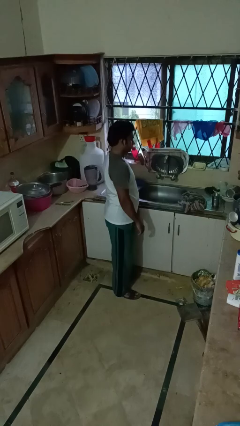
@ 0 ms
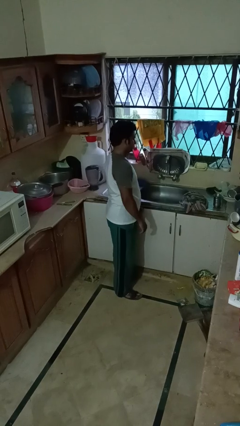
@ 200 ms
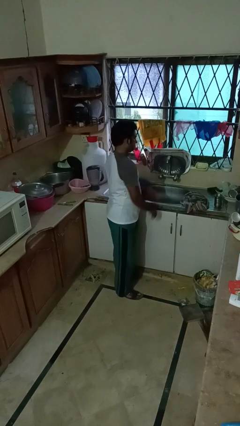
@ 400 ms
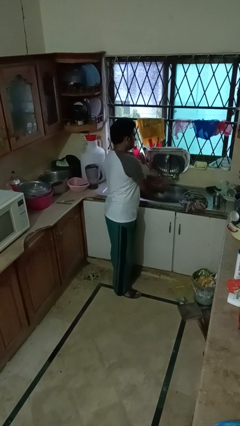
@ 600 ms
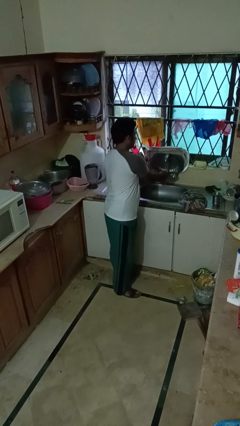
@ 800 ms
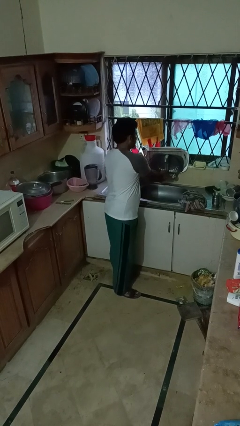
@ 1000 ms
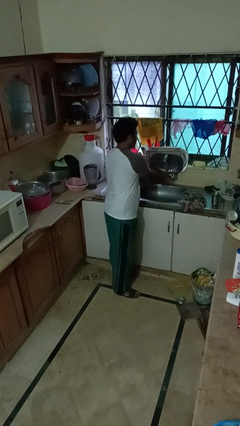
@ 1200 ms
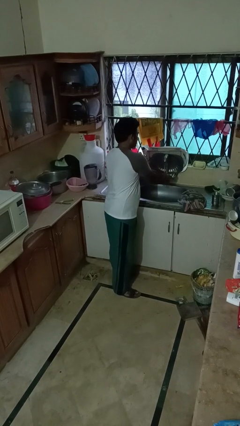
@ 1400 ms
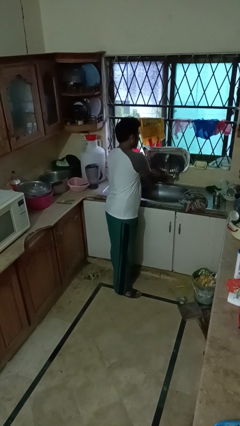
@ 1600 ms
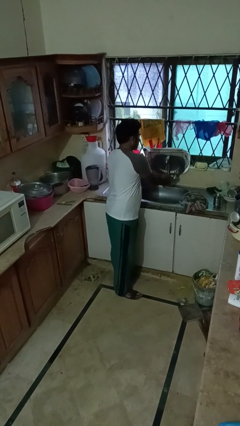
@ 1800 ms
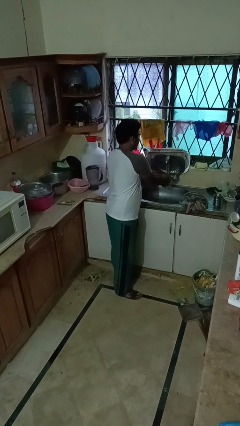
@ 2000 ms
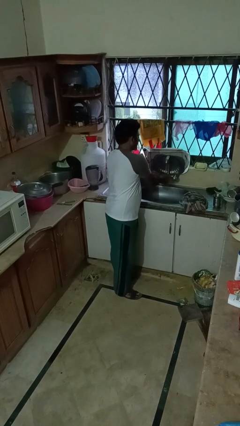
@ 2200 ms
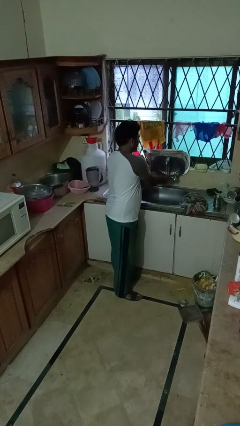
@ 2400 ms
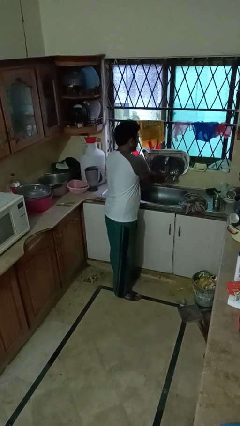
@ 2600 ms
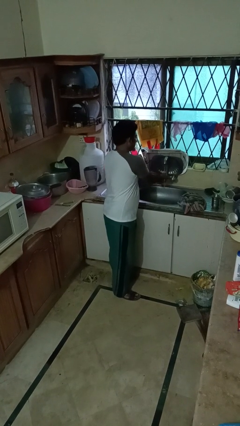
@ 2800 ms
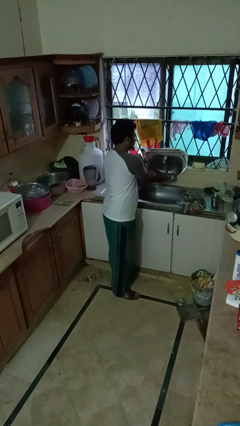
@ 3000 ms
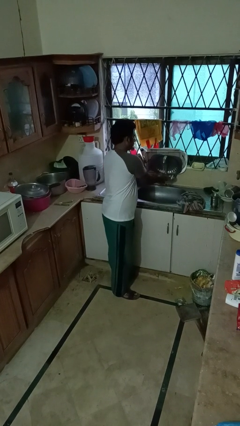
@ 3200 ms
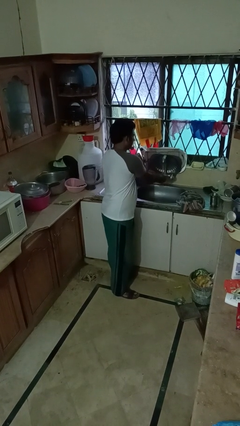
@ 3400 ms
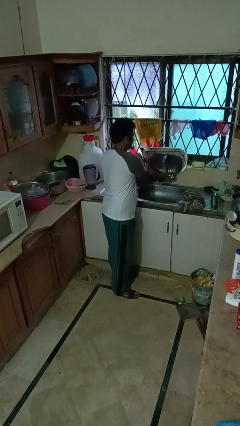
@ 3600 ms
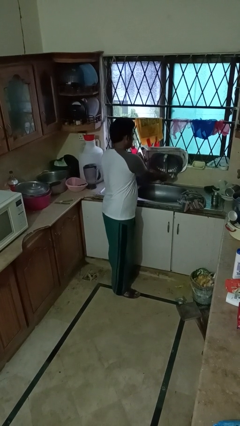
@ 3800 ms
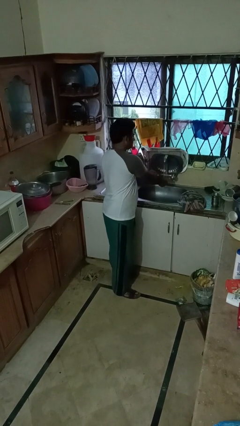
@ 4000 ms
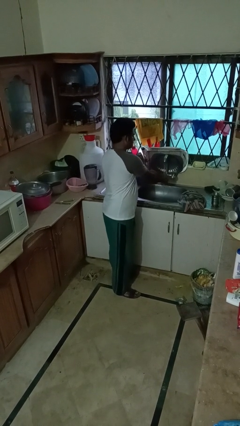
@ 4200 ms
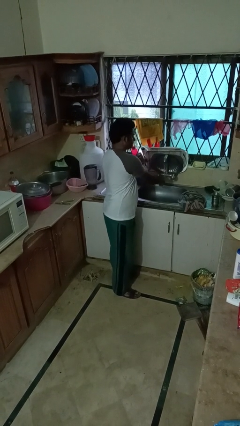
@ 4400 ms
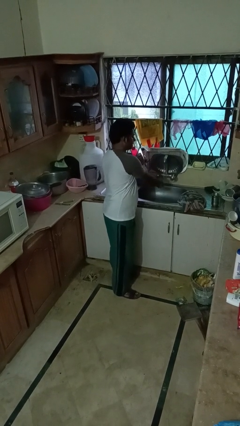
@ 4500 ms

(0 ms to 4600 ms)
person washes hands

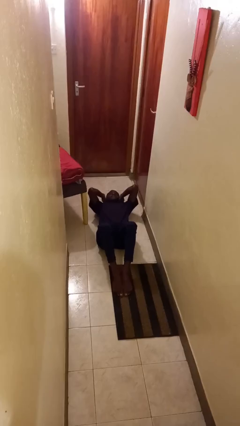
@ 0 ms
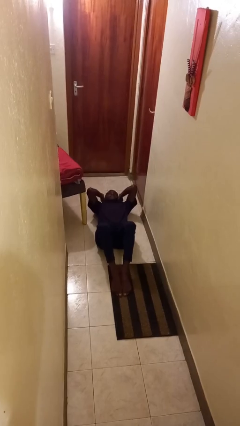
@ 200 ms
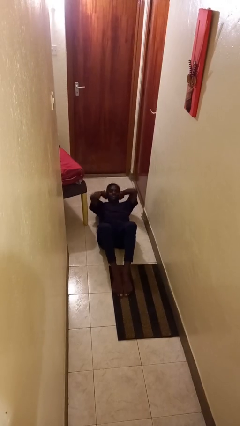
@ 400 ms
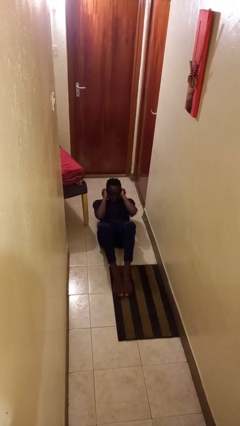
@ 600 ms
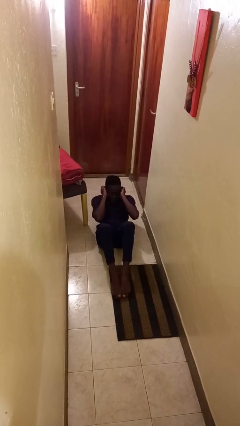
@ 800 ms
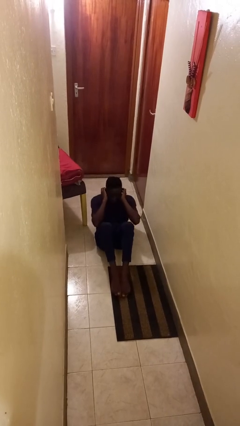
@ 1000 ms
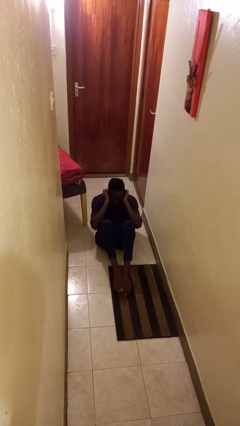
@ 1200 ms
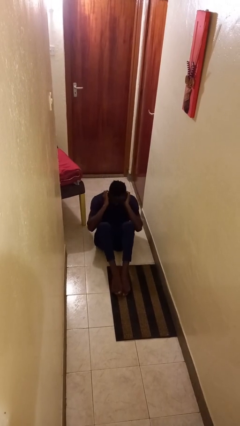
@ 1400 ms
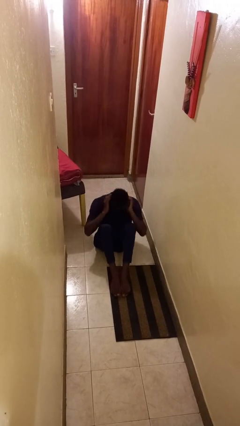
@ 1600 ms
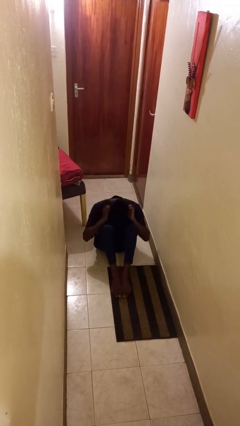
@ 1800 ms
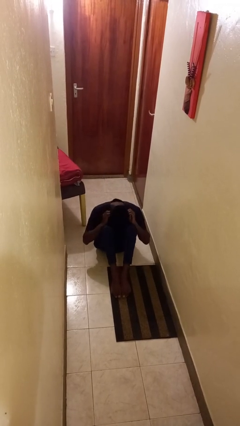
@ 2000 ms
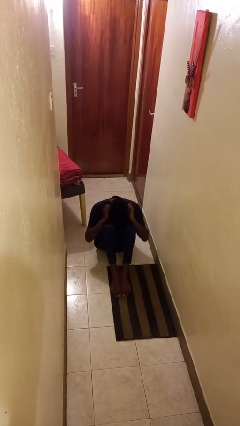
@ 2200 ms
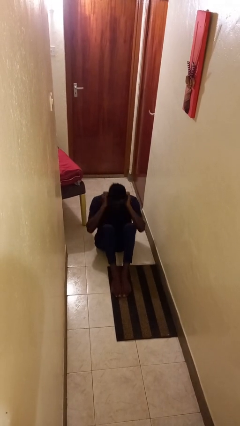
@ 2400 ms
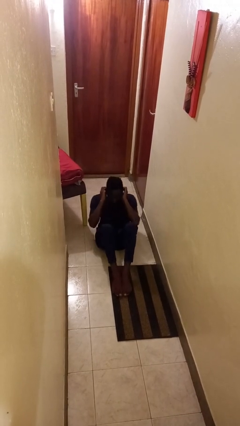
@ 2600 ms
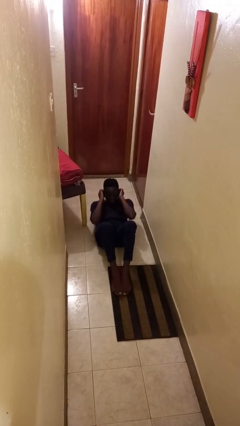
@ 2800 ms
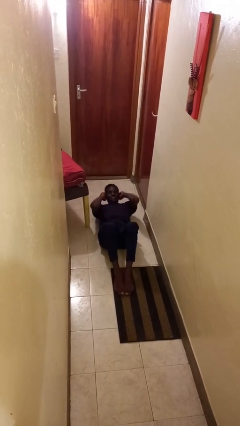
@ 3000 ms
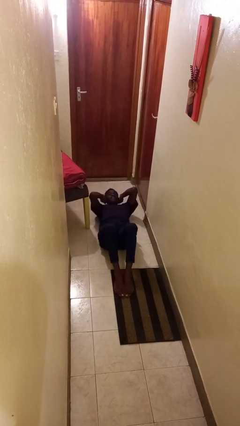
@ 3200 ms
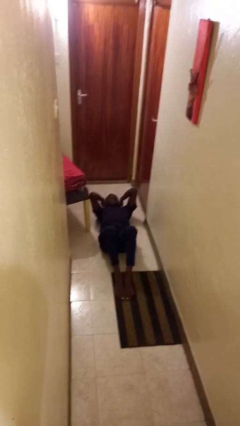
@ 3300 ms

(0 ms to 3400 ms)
person exercises with situp

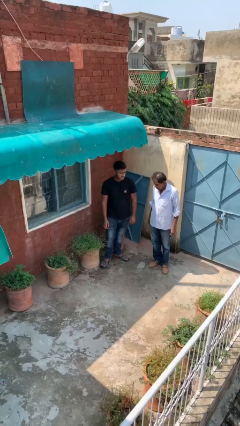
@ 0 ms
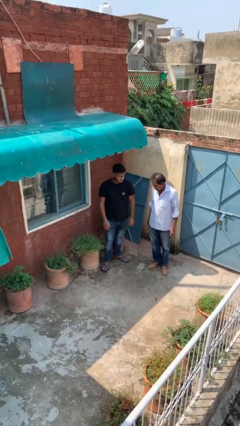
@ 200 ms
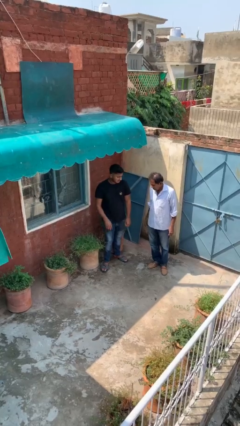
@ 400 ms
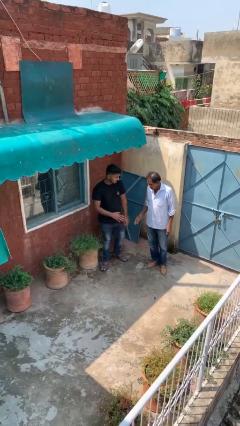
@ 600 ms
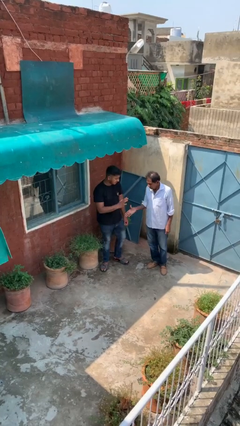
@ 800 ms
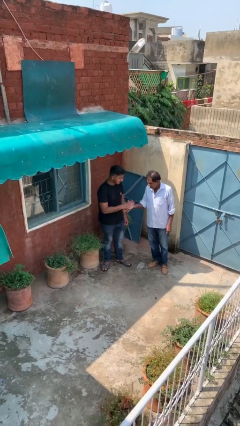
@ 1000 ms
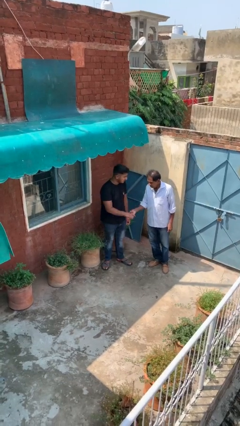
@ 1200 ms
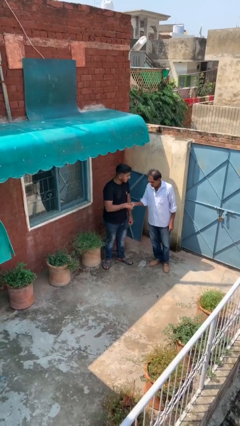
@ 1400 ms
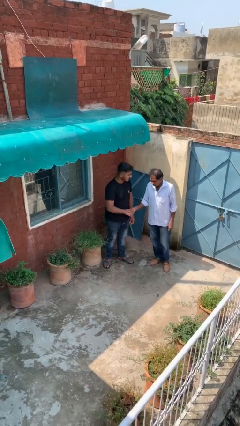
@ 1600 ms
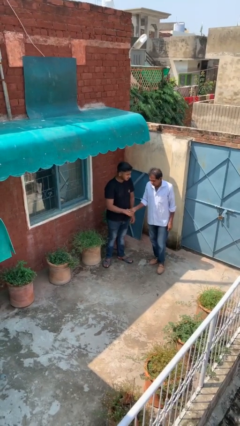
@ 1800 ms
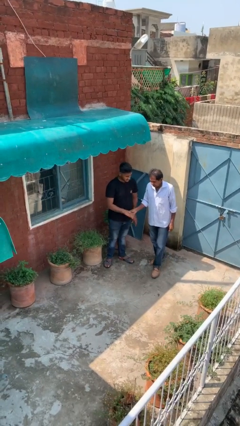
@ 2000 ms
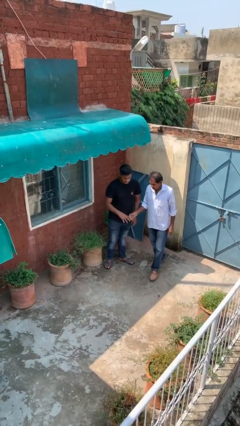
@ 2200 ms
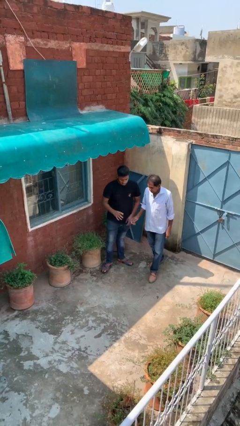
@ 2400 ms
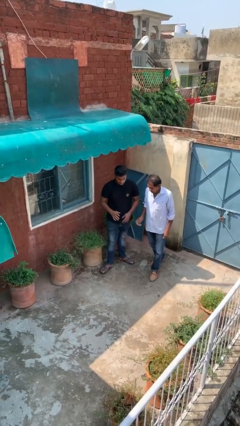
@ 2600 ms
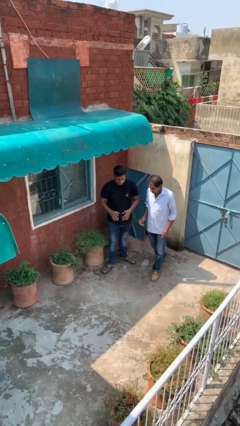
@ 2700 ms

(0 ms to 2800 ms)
person shakes hand

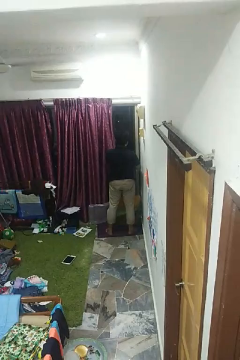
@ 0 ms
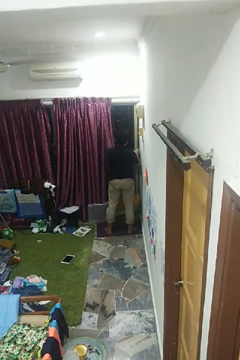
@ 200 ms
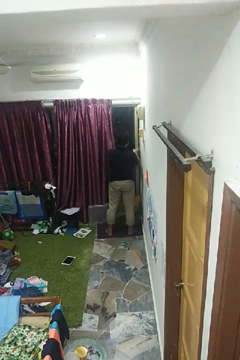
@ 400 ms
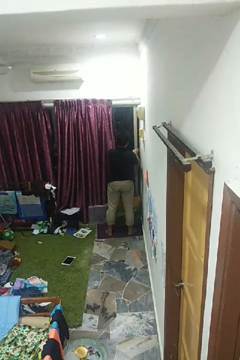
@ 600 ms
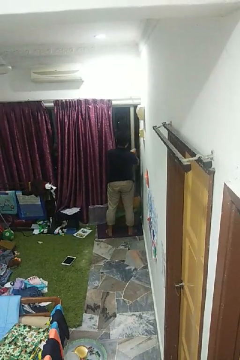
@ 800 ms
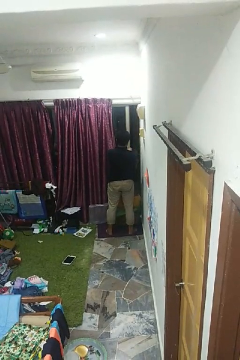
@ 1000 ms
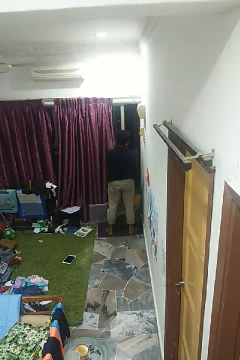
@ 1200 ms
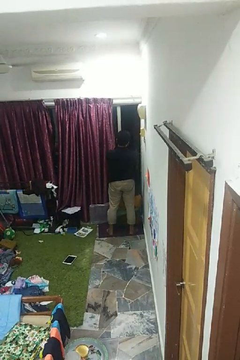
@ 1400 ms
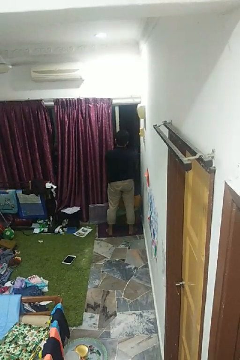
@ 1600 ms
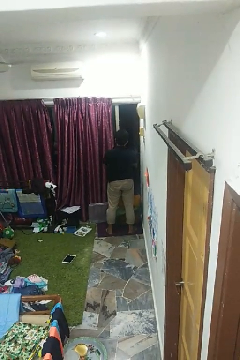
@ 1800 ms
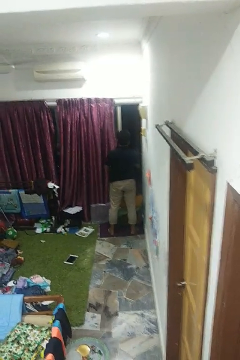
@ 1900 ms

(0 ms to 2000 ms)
person opens home window

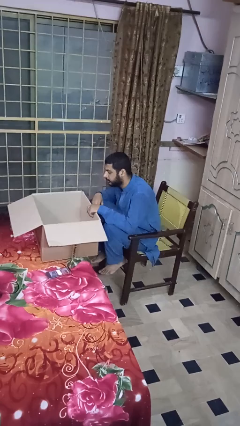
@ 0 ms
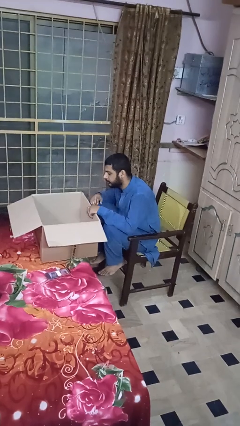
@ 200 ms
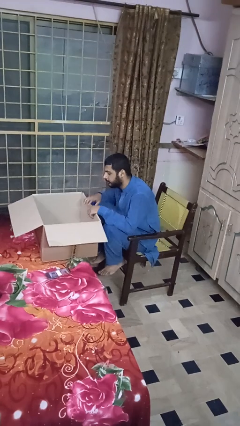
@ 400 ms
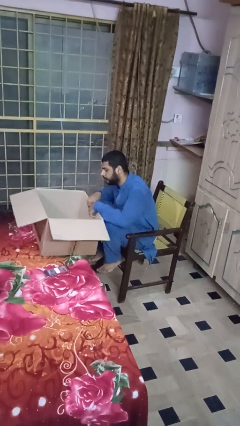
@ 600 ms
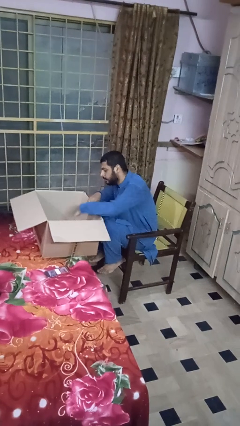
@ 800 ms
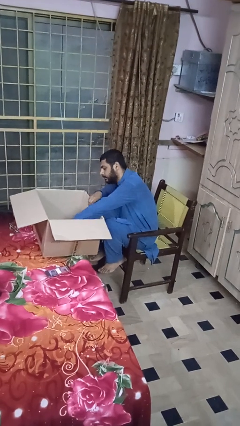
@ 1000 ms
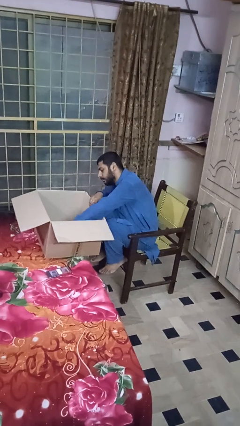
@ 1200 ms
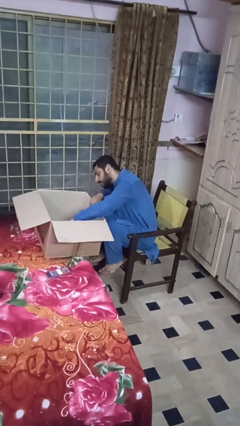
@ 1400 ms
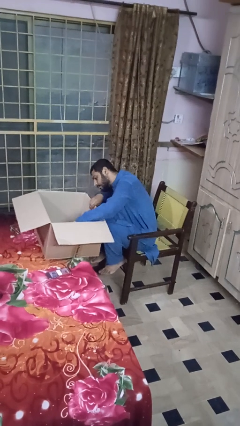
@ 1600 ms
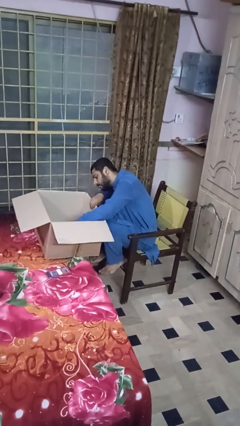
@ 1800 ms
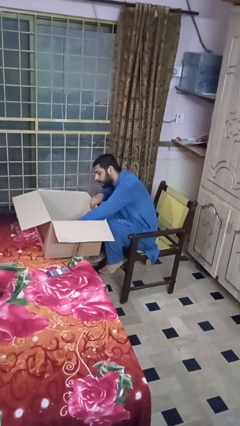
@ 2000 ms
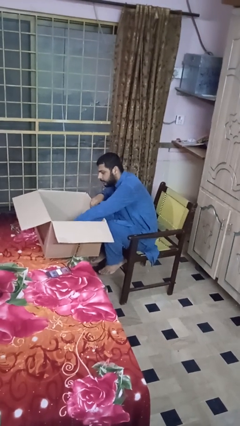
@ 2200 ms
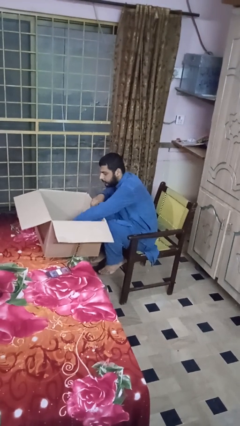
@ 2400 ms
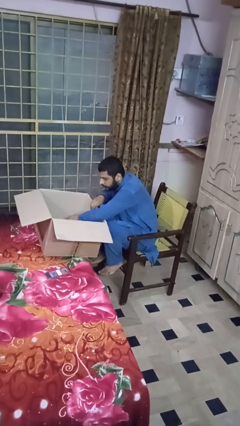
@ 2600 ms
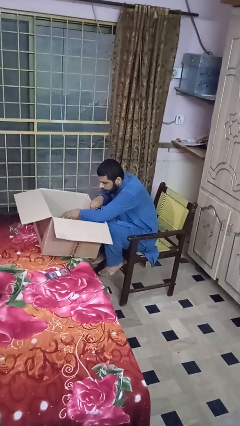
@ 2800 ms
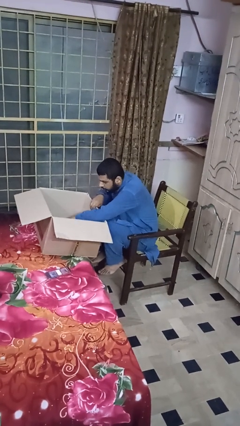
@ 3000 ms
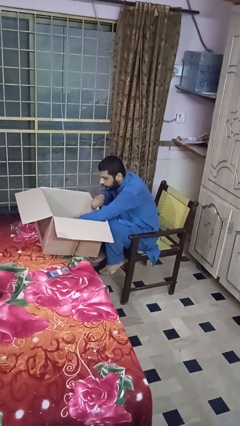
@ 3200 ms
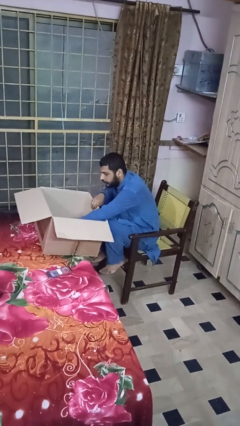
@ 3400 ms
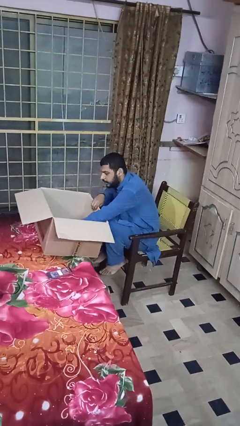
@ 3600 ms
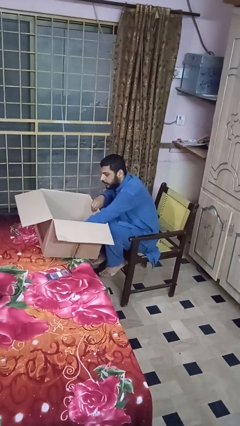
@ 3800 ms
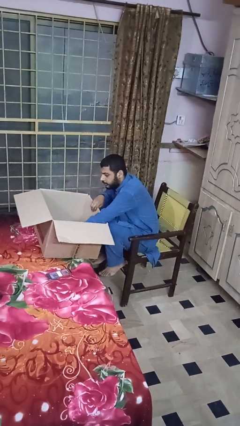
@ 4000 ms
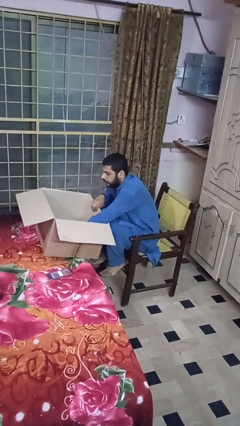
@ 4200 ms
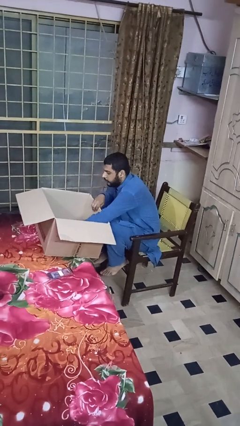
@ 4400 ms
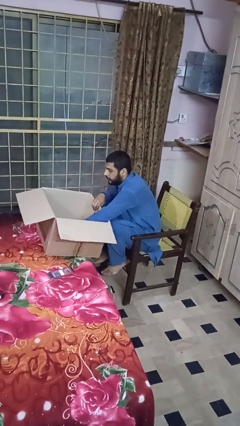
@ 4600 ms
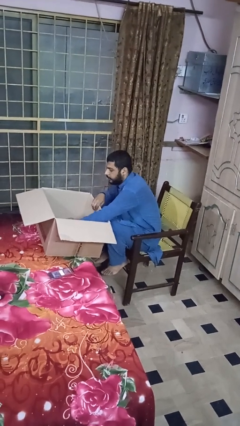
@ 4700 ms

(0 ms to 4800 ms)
person searches in box
